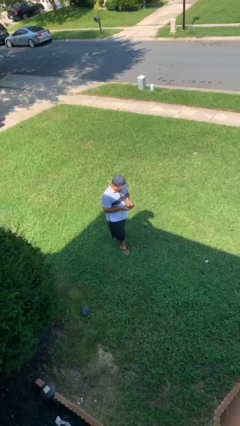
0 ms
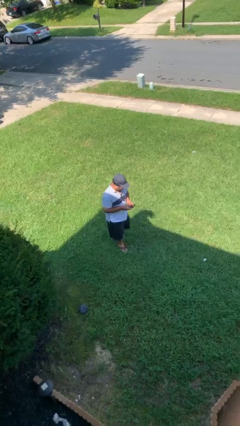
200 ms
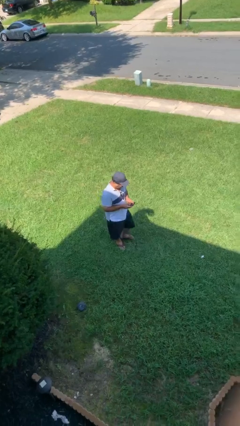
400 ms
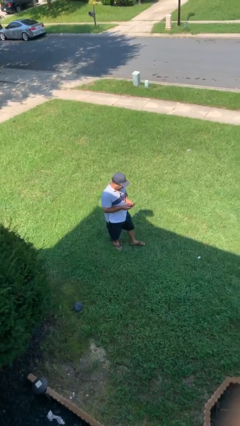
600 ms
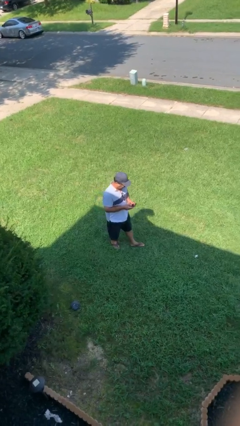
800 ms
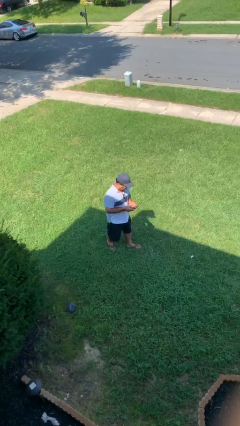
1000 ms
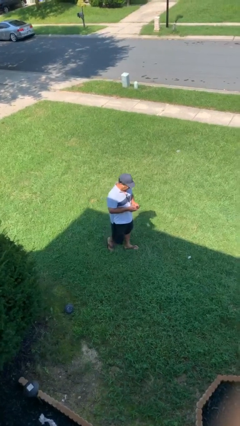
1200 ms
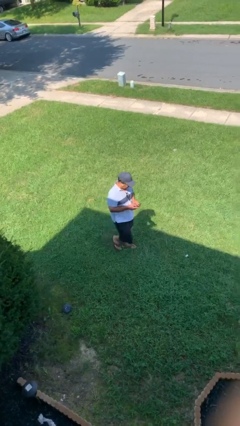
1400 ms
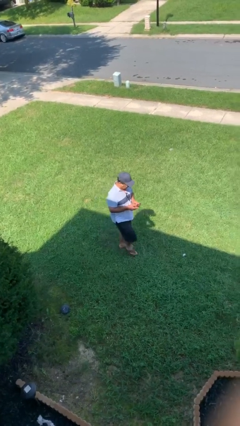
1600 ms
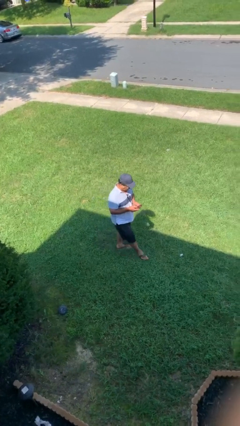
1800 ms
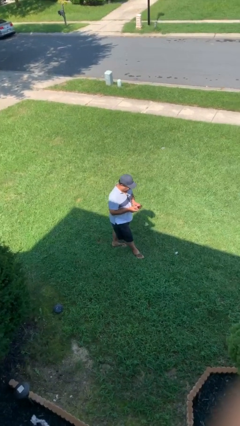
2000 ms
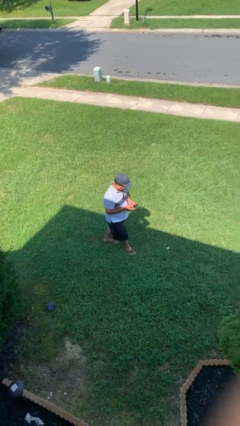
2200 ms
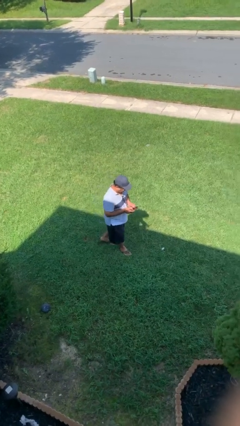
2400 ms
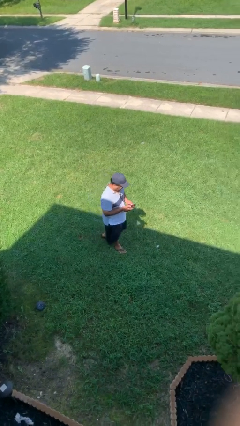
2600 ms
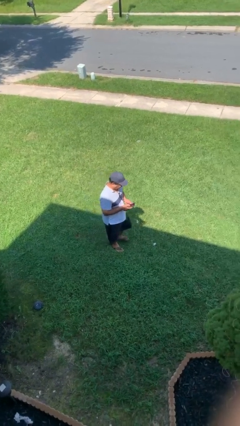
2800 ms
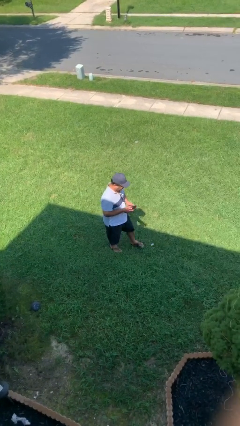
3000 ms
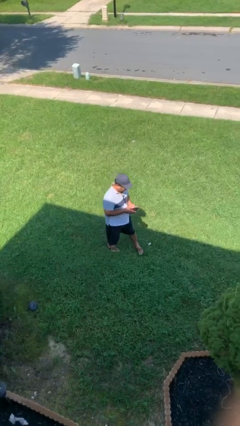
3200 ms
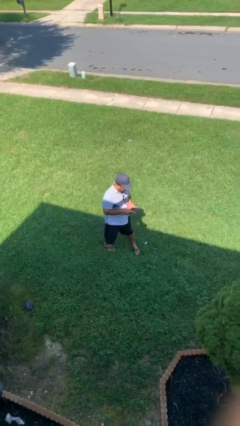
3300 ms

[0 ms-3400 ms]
person texts on phone

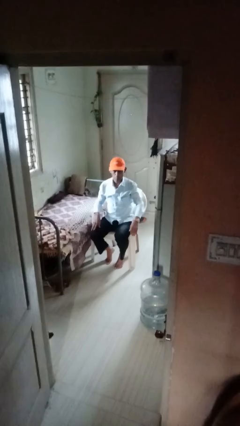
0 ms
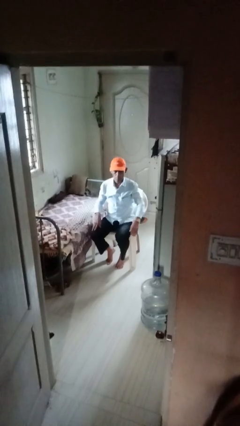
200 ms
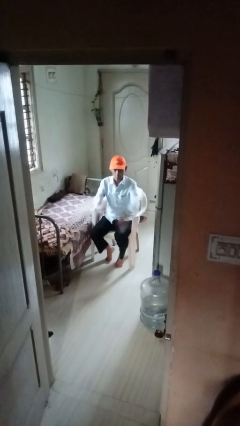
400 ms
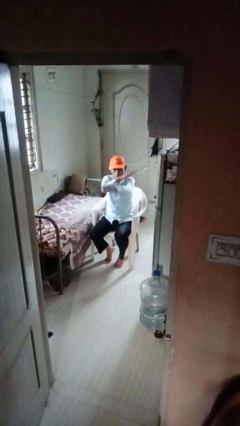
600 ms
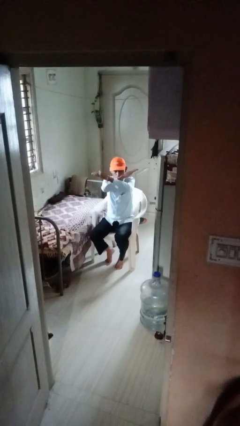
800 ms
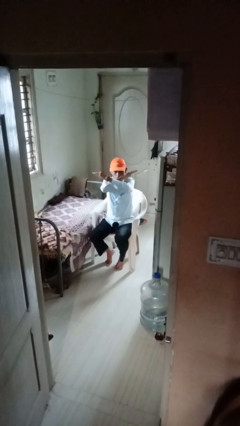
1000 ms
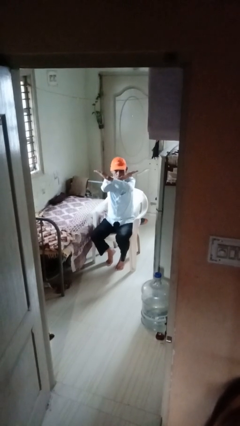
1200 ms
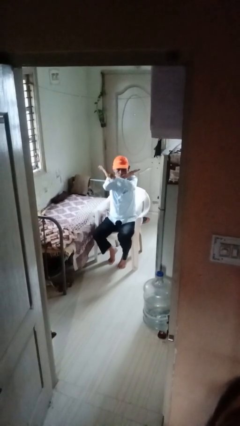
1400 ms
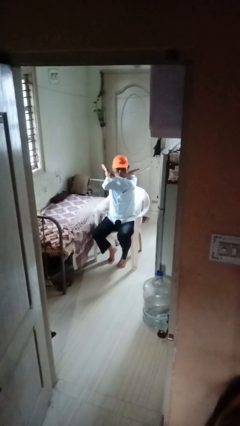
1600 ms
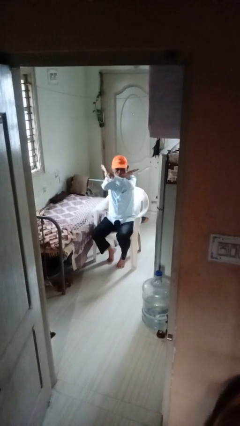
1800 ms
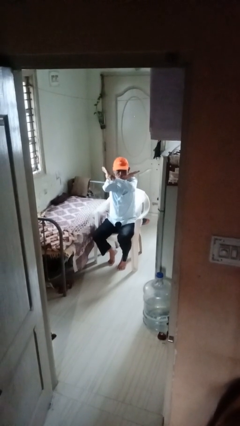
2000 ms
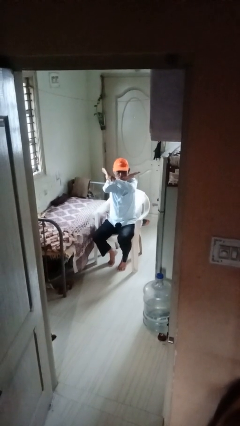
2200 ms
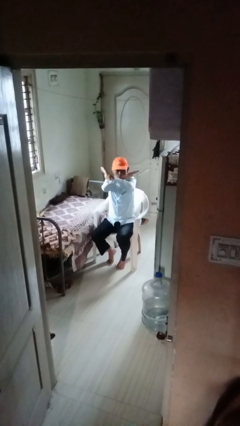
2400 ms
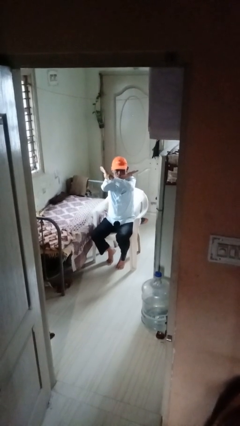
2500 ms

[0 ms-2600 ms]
person gestures arms x

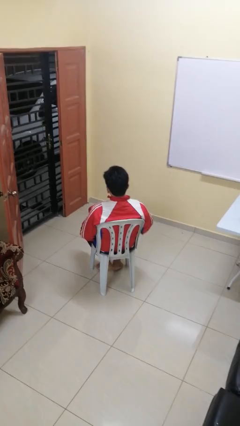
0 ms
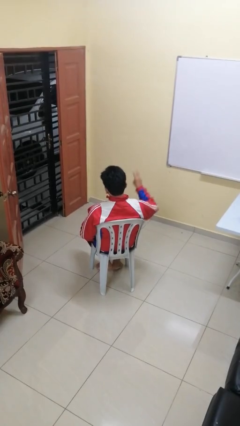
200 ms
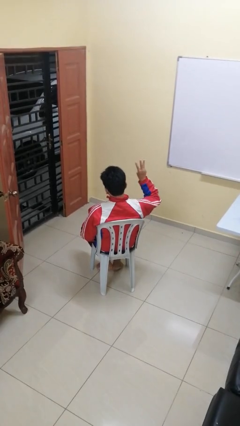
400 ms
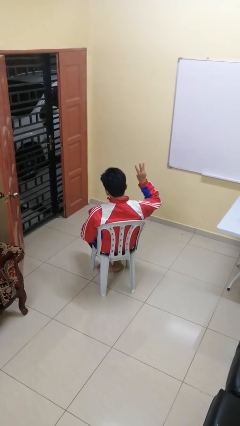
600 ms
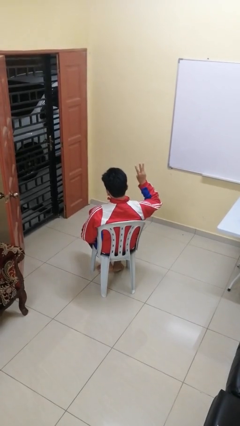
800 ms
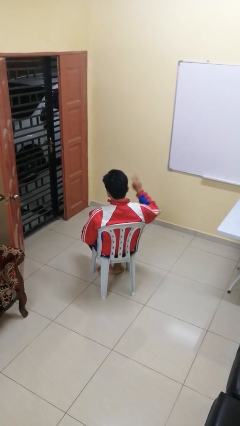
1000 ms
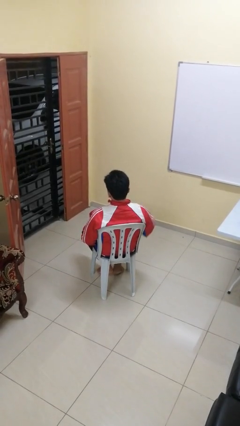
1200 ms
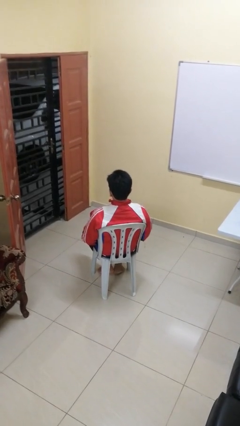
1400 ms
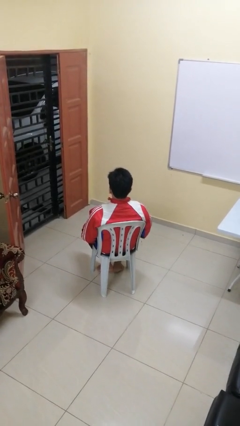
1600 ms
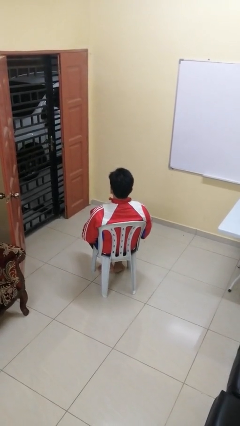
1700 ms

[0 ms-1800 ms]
person gestures number three

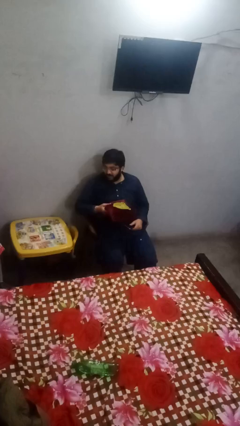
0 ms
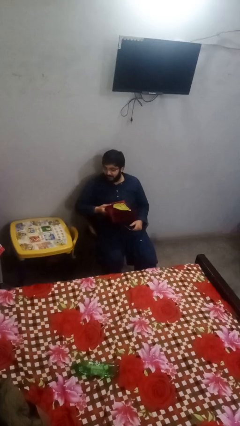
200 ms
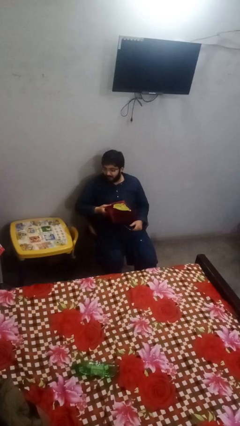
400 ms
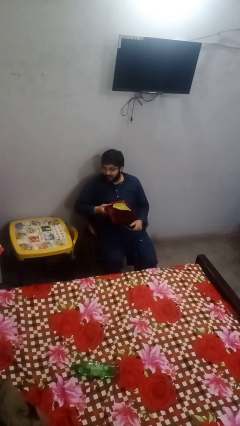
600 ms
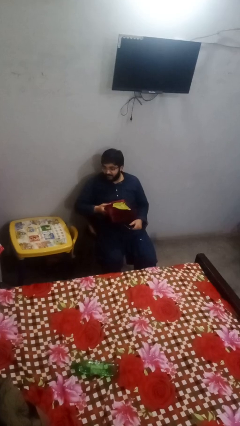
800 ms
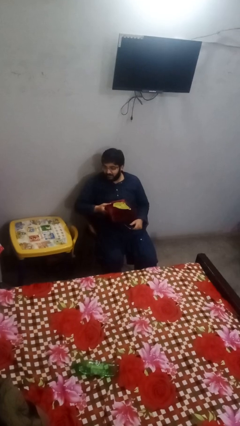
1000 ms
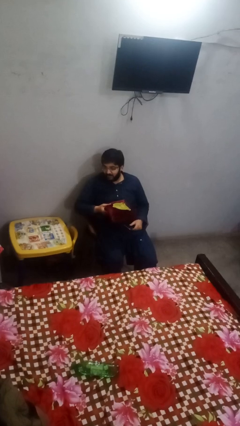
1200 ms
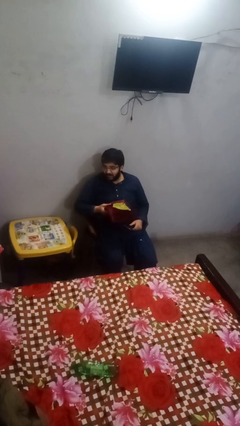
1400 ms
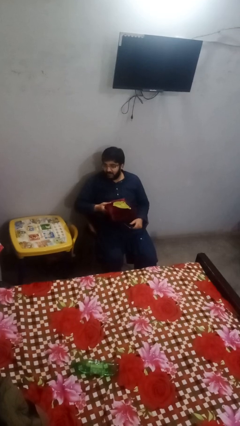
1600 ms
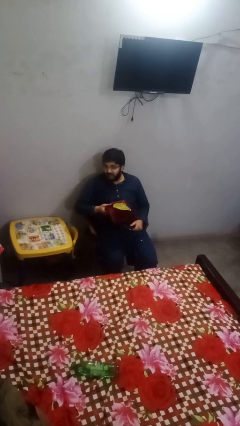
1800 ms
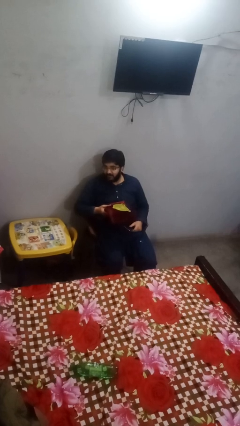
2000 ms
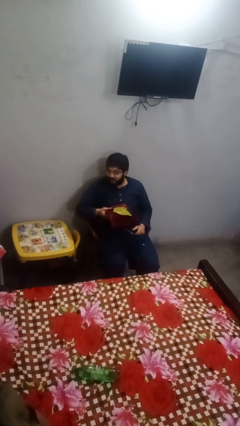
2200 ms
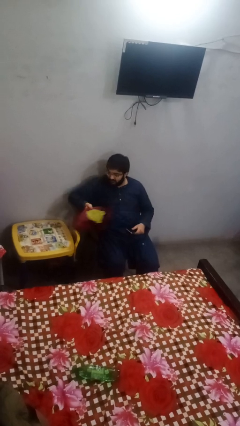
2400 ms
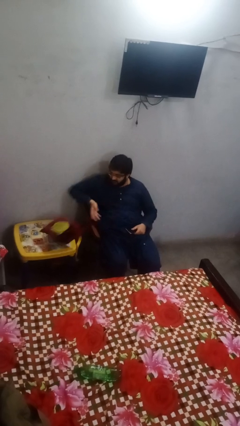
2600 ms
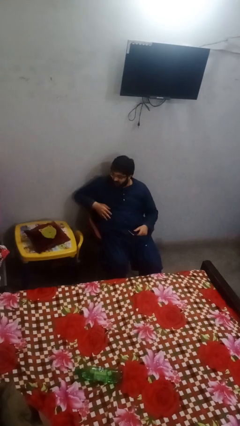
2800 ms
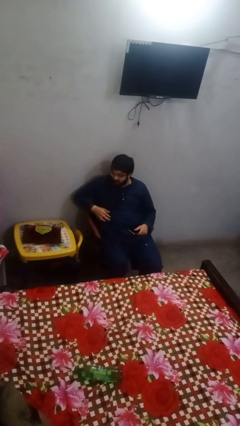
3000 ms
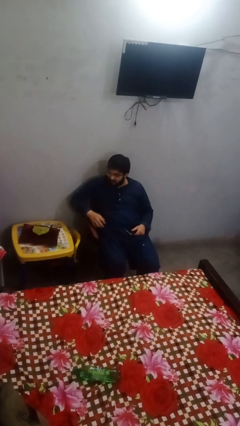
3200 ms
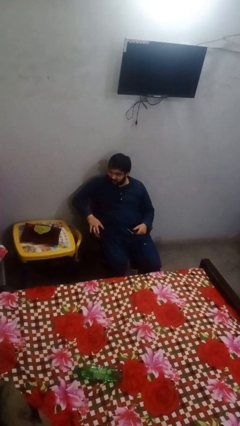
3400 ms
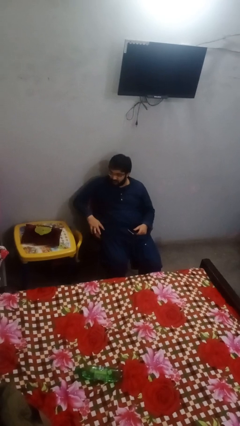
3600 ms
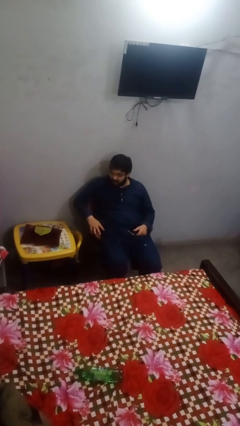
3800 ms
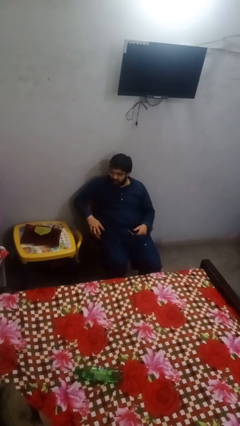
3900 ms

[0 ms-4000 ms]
person throws object on table

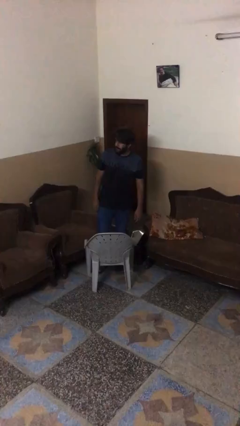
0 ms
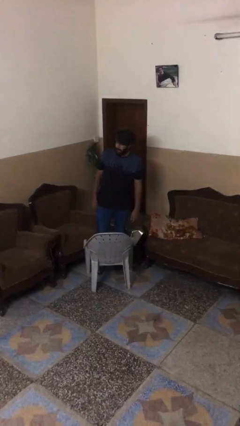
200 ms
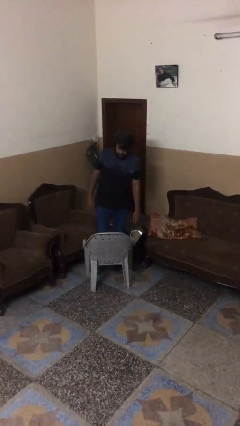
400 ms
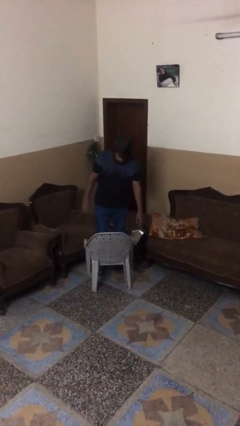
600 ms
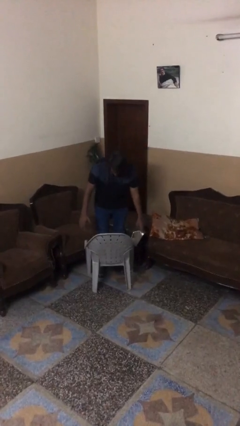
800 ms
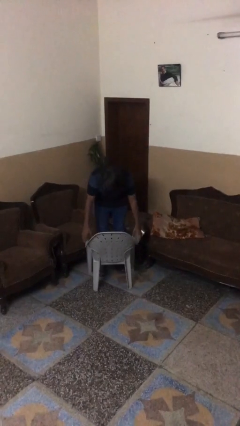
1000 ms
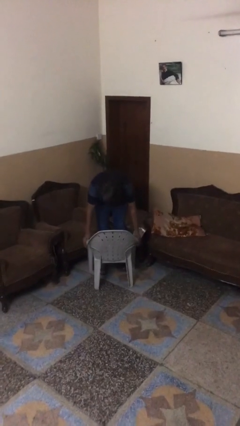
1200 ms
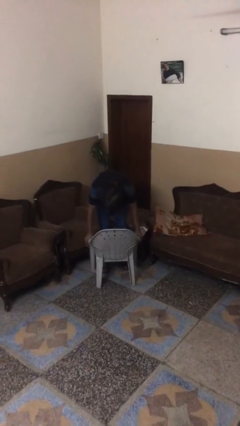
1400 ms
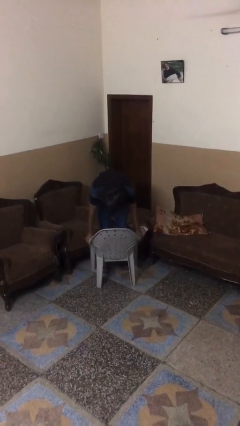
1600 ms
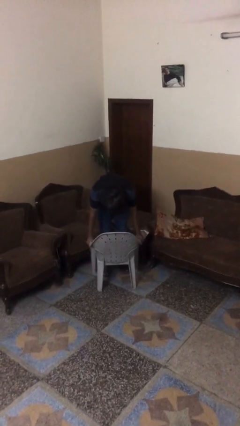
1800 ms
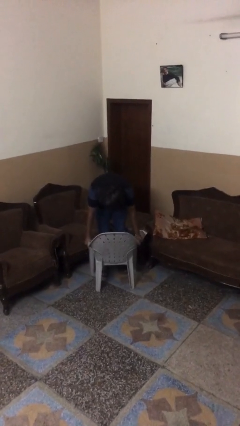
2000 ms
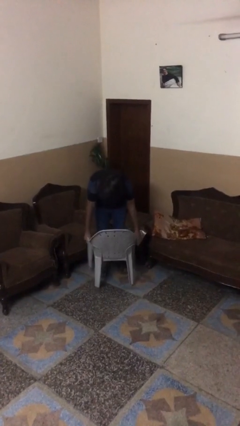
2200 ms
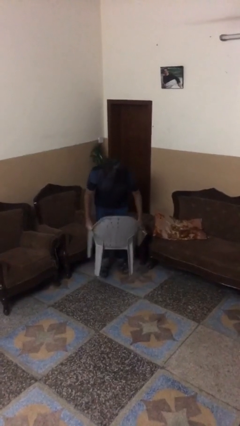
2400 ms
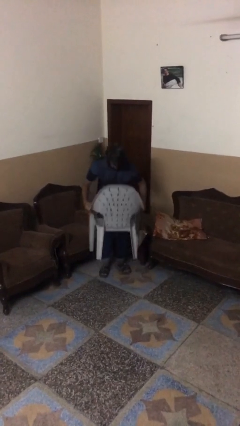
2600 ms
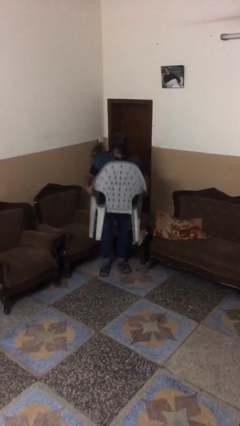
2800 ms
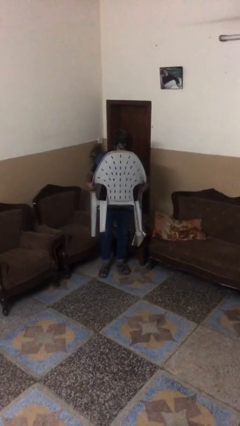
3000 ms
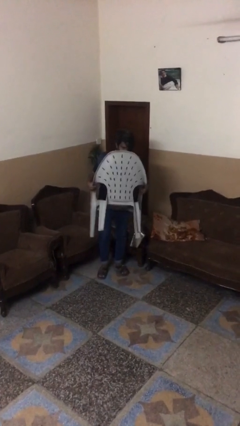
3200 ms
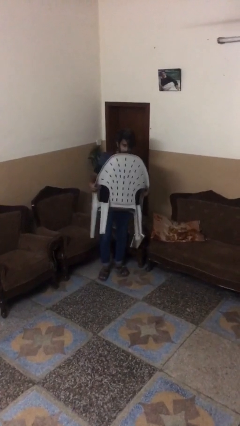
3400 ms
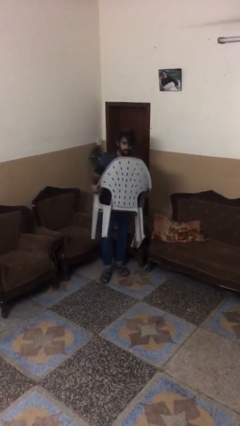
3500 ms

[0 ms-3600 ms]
person picks up object from floor

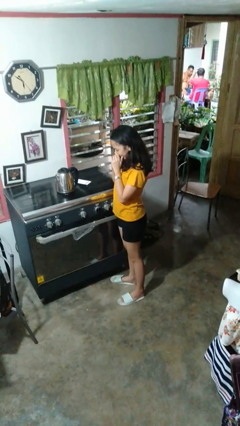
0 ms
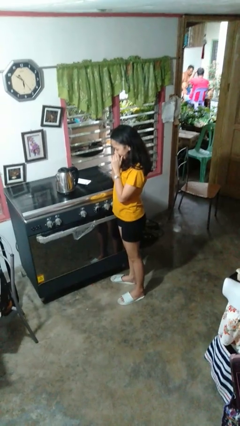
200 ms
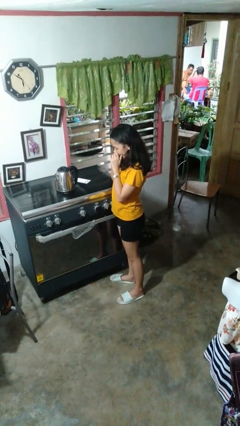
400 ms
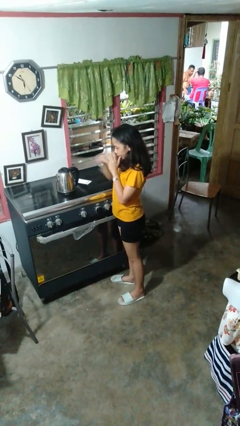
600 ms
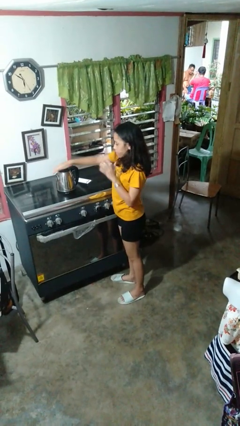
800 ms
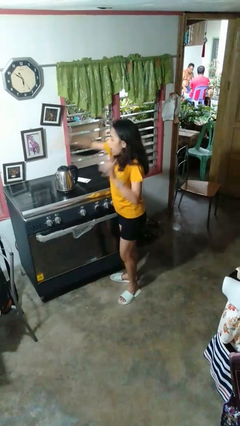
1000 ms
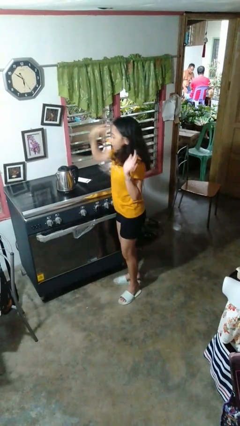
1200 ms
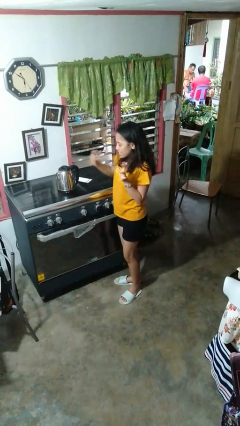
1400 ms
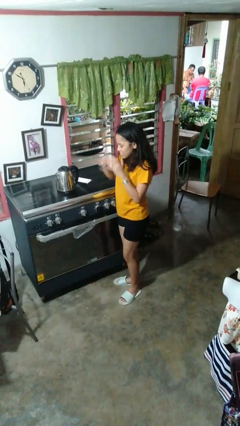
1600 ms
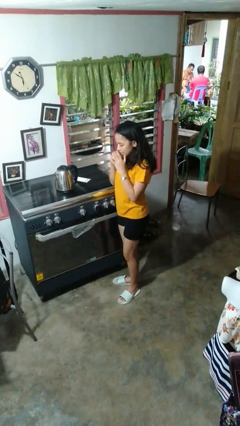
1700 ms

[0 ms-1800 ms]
person burns hand

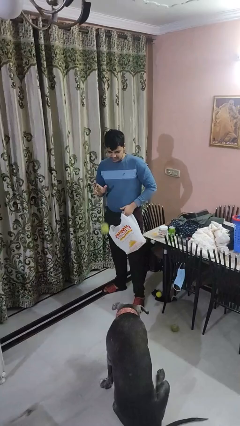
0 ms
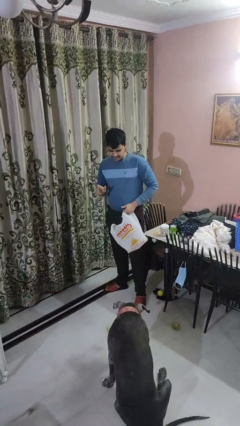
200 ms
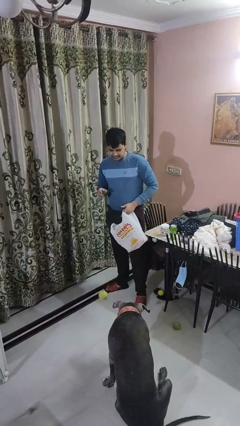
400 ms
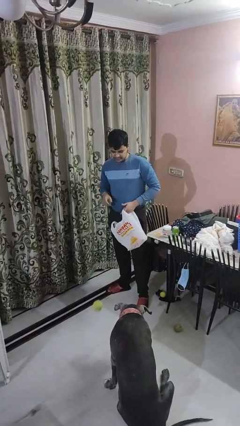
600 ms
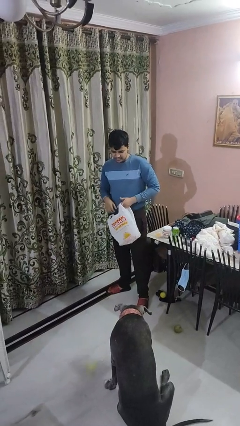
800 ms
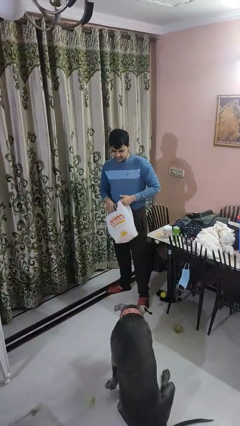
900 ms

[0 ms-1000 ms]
person throws object to dog
